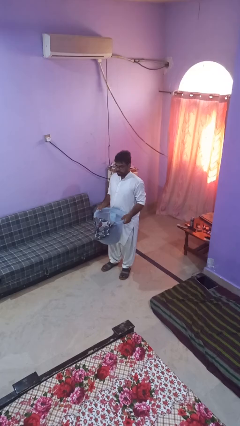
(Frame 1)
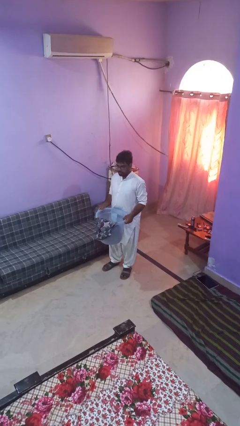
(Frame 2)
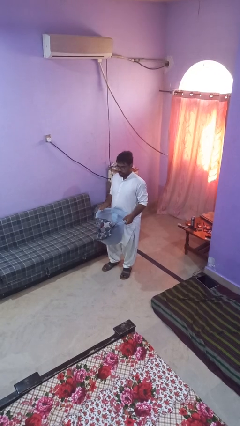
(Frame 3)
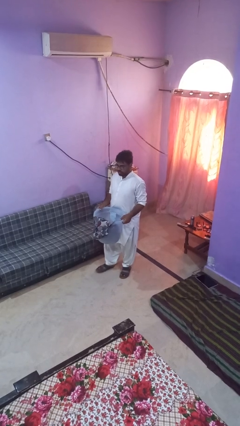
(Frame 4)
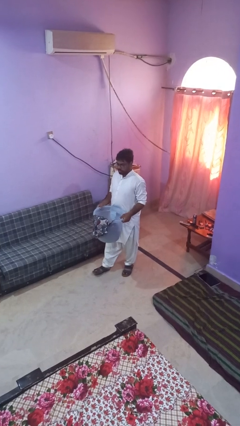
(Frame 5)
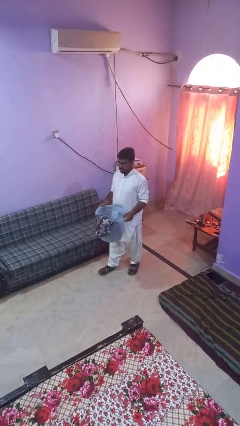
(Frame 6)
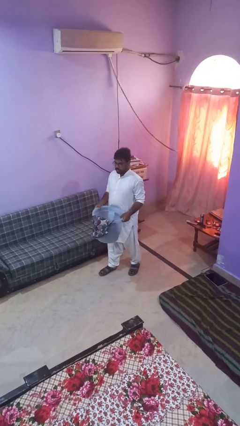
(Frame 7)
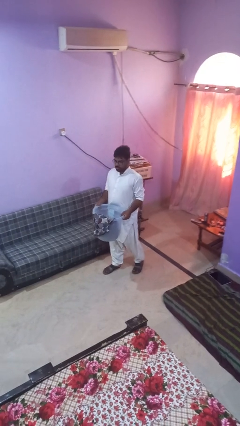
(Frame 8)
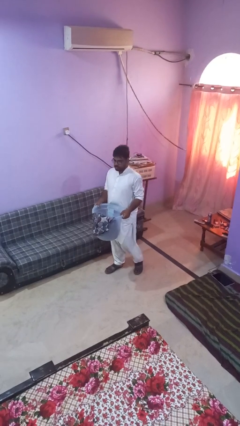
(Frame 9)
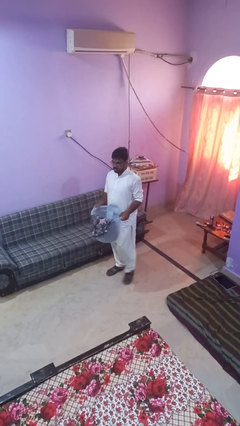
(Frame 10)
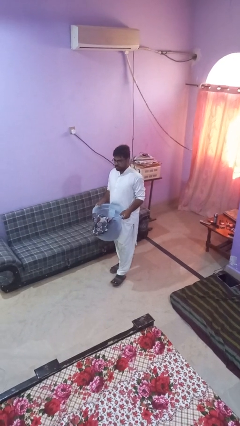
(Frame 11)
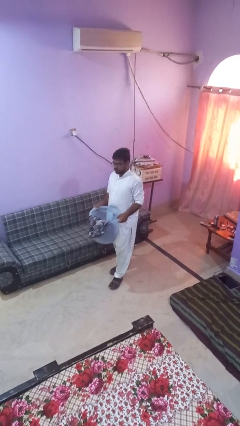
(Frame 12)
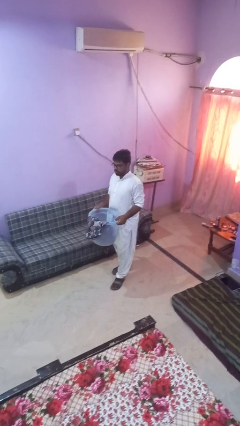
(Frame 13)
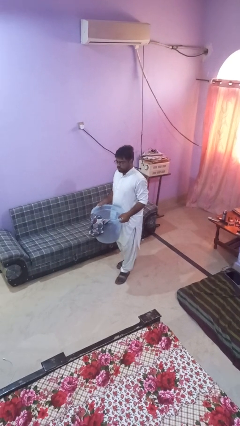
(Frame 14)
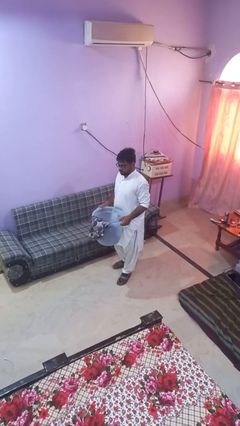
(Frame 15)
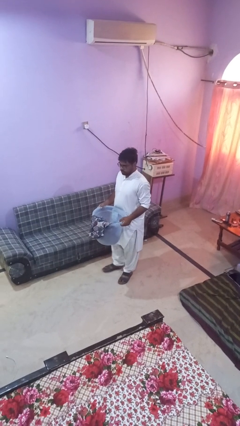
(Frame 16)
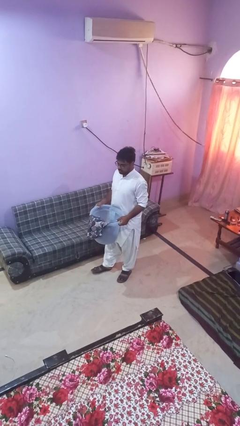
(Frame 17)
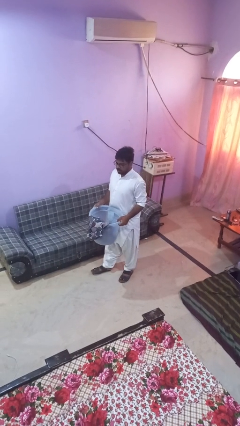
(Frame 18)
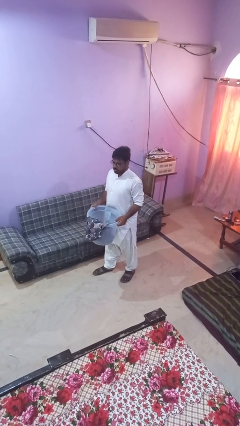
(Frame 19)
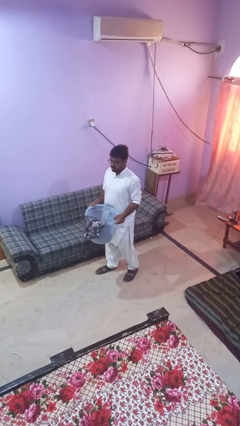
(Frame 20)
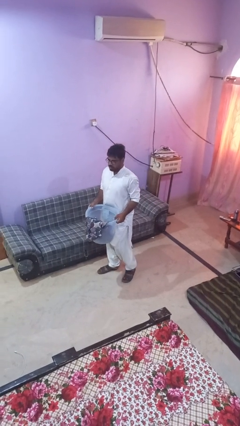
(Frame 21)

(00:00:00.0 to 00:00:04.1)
person carries laundry basket

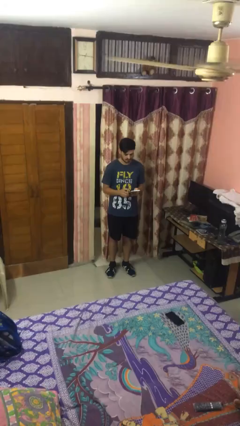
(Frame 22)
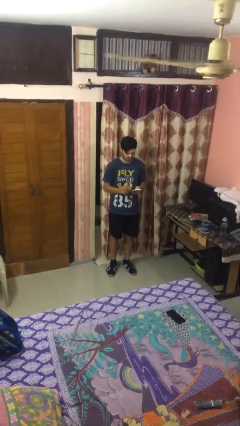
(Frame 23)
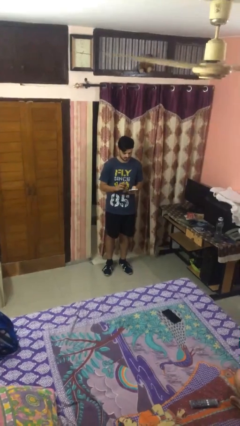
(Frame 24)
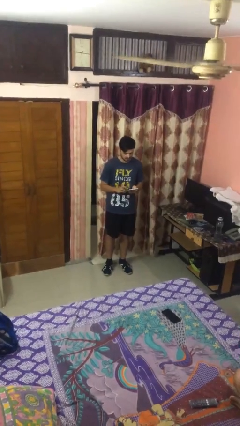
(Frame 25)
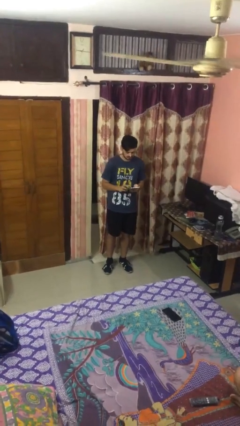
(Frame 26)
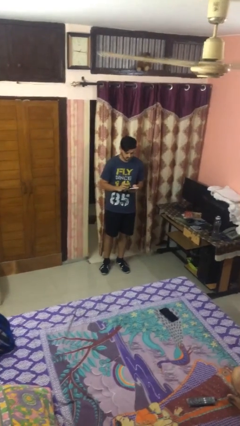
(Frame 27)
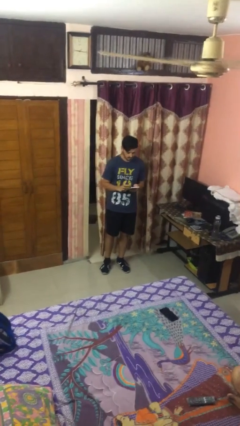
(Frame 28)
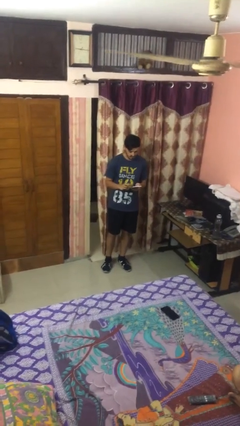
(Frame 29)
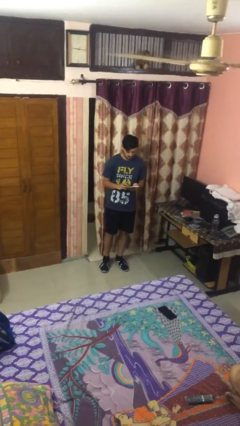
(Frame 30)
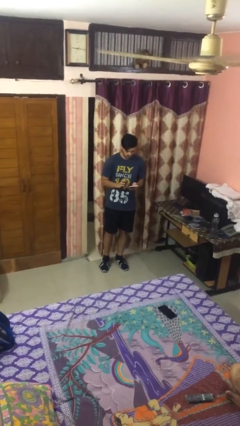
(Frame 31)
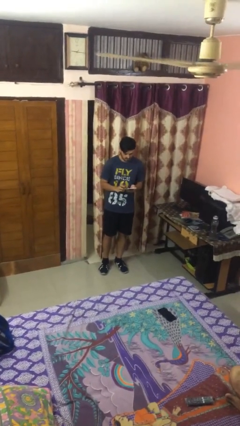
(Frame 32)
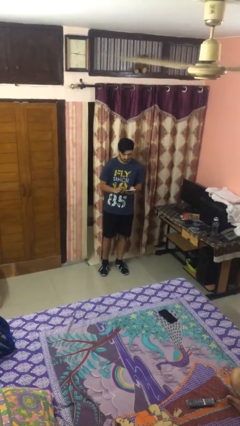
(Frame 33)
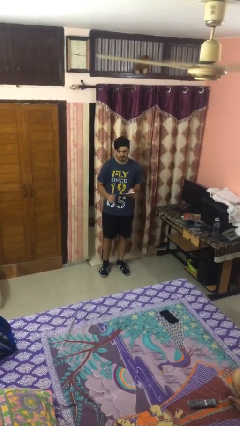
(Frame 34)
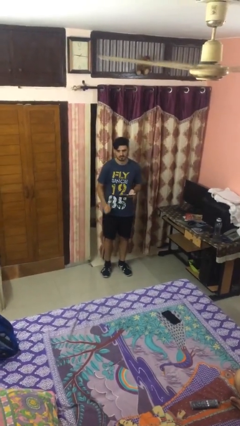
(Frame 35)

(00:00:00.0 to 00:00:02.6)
person interacts with tablet

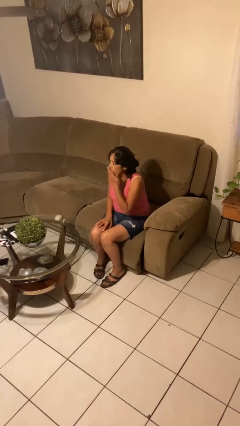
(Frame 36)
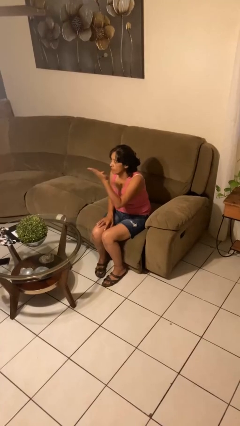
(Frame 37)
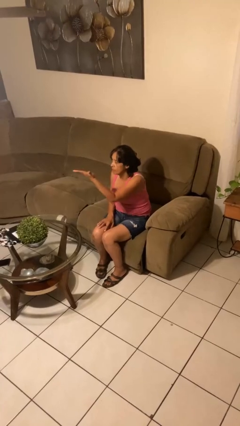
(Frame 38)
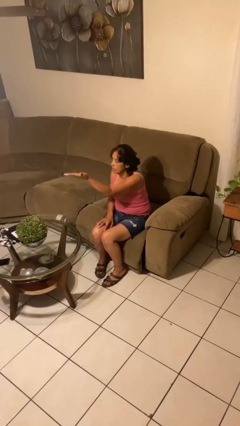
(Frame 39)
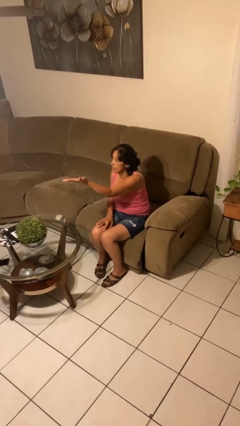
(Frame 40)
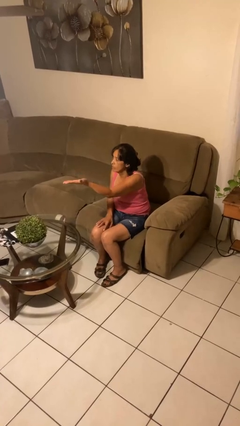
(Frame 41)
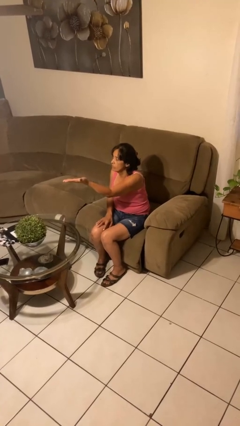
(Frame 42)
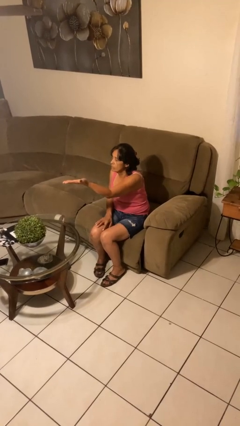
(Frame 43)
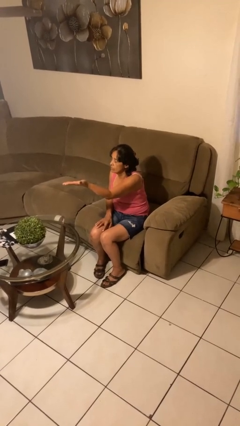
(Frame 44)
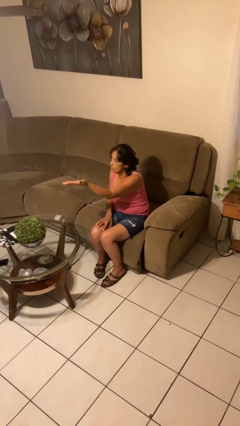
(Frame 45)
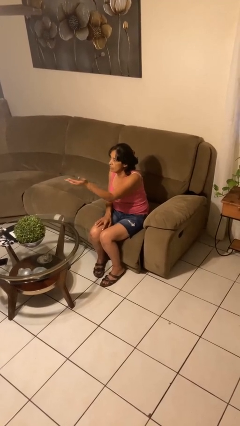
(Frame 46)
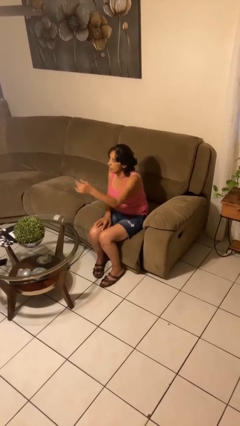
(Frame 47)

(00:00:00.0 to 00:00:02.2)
person gestures blow kiss

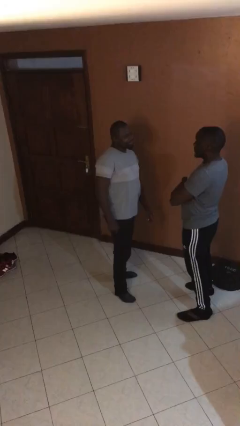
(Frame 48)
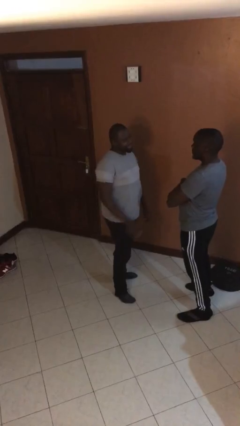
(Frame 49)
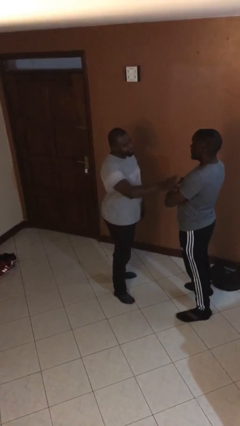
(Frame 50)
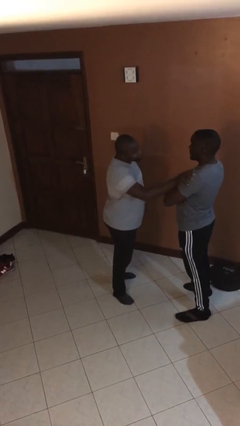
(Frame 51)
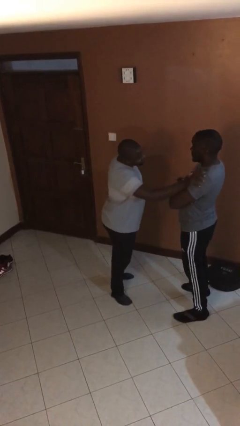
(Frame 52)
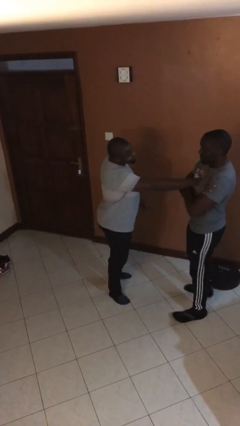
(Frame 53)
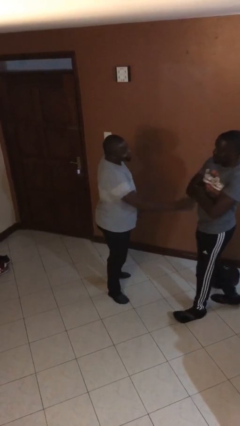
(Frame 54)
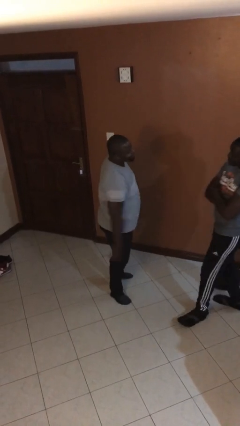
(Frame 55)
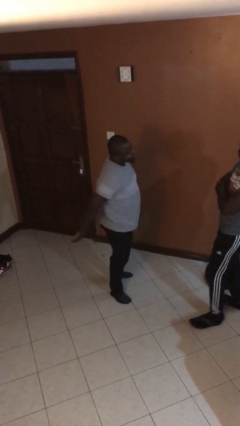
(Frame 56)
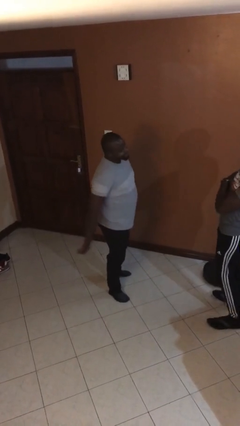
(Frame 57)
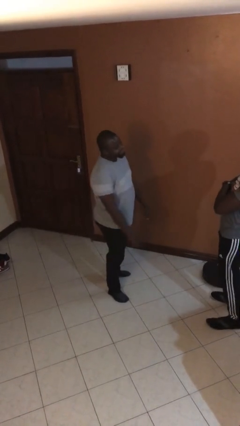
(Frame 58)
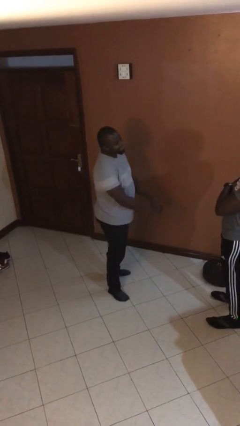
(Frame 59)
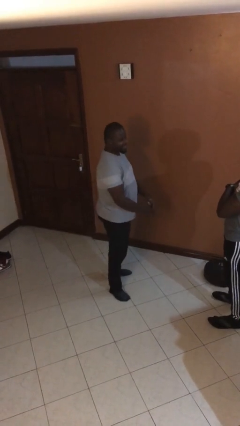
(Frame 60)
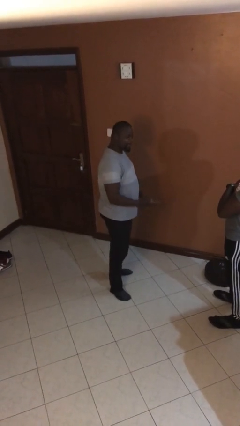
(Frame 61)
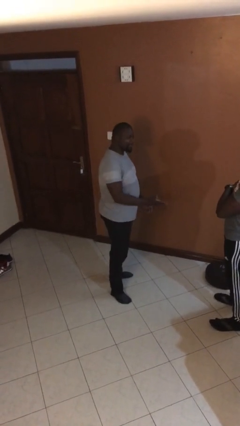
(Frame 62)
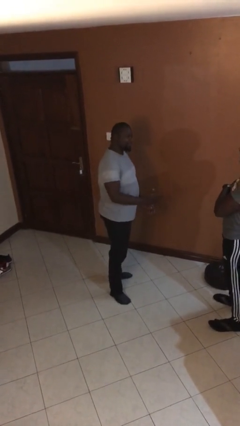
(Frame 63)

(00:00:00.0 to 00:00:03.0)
person shoves person

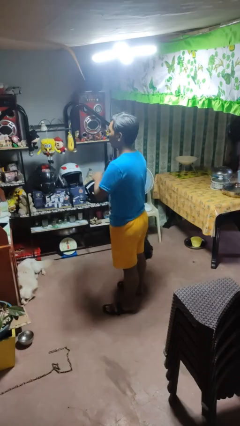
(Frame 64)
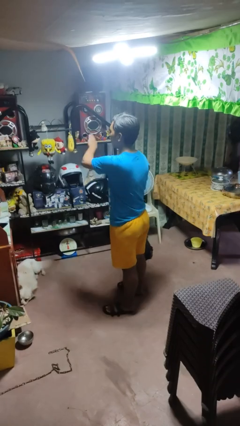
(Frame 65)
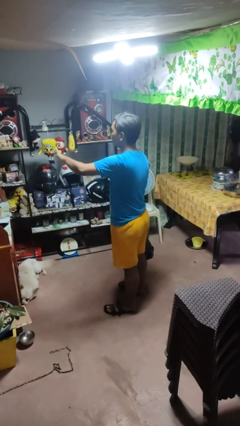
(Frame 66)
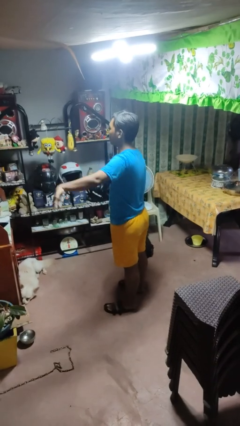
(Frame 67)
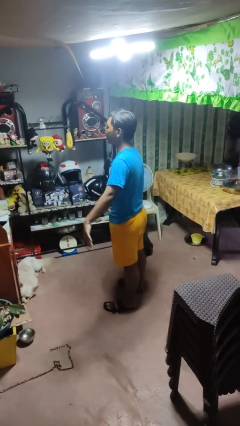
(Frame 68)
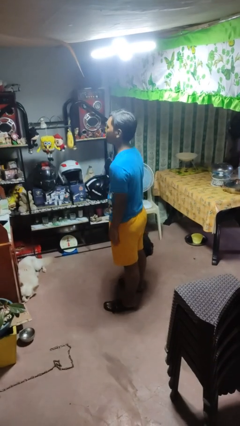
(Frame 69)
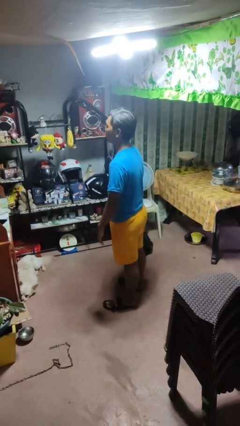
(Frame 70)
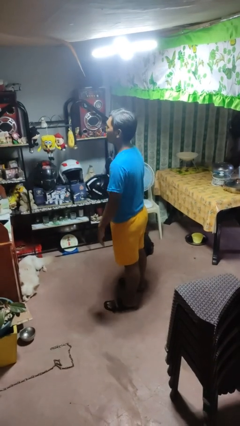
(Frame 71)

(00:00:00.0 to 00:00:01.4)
person gestures swipe left

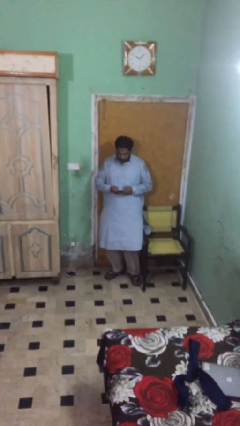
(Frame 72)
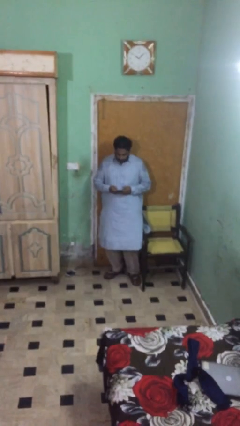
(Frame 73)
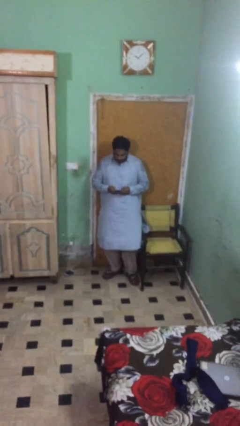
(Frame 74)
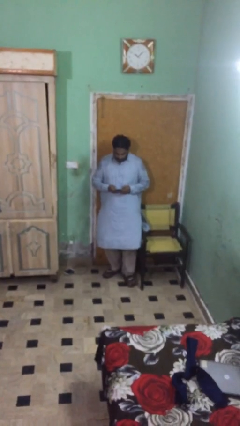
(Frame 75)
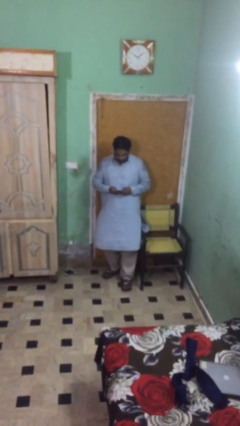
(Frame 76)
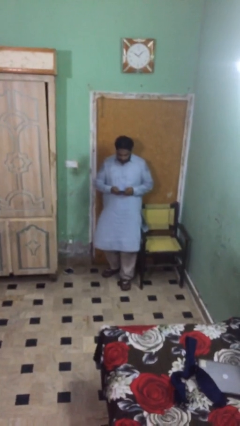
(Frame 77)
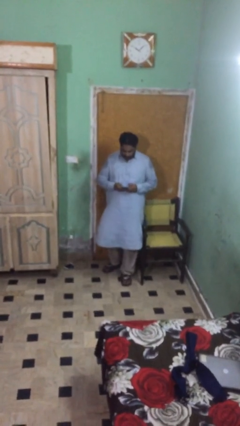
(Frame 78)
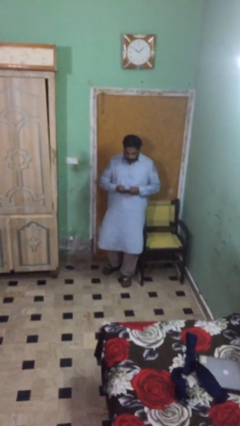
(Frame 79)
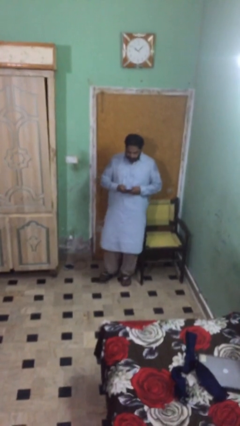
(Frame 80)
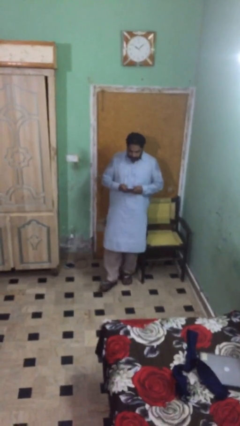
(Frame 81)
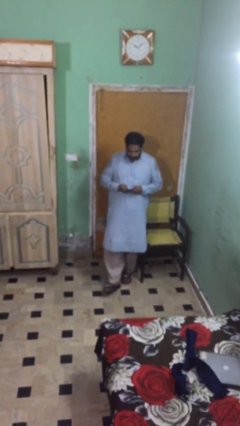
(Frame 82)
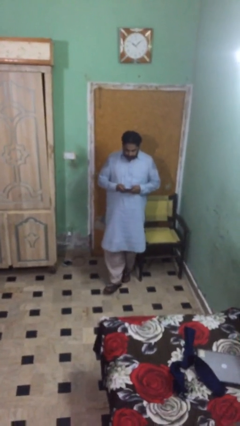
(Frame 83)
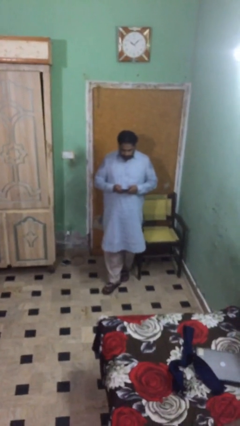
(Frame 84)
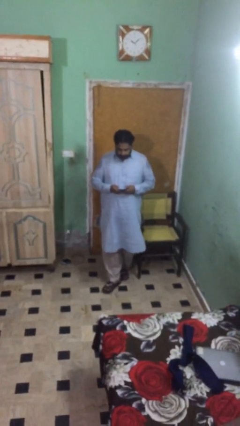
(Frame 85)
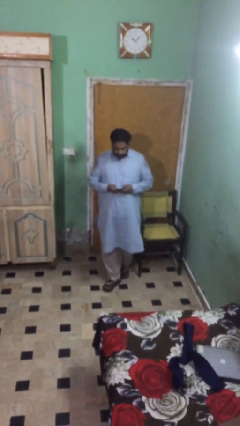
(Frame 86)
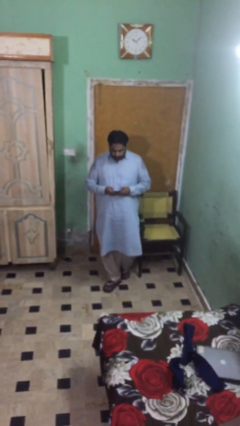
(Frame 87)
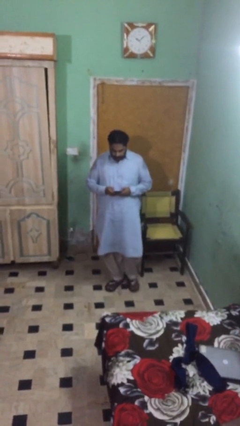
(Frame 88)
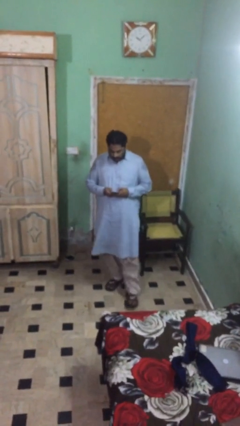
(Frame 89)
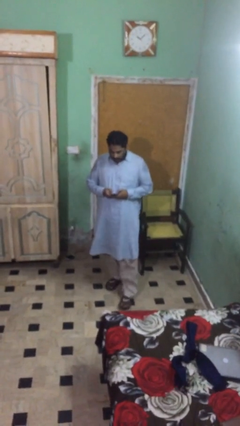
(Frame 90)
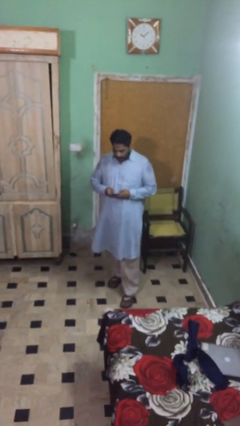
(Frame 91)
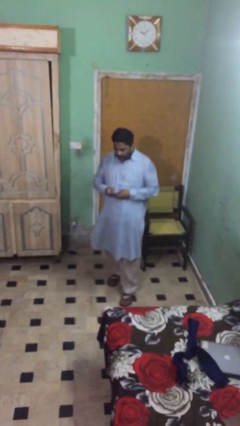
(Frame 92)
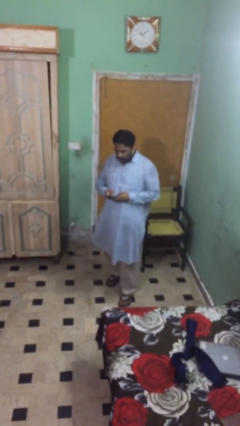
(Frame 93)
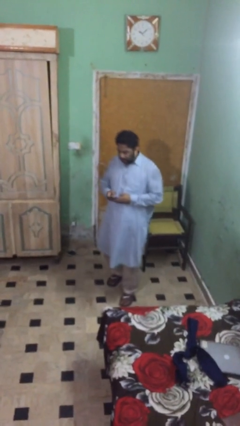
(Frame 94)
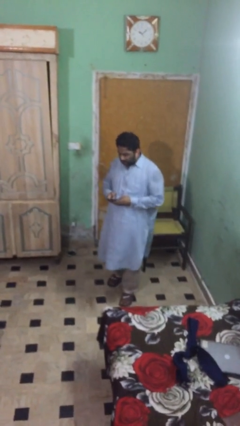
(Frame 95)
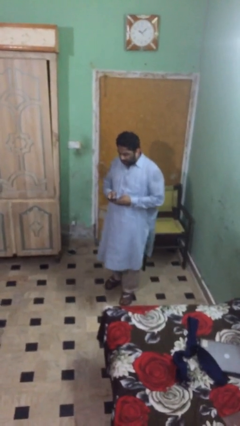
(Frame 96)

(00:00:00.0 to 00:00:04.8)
person texts on phone
